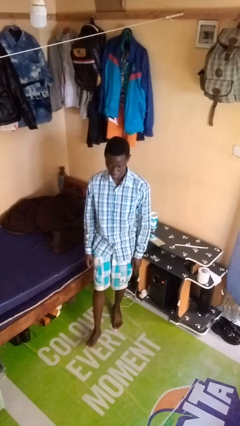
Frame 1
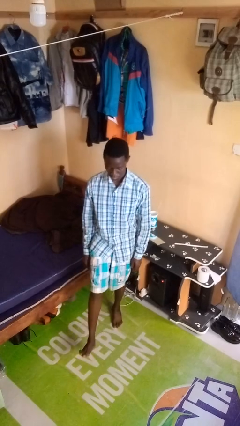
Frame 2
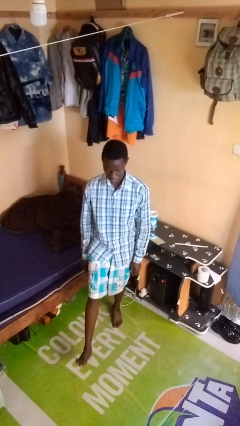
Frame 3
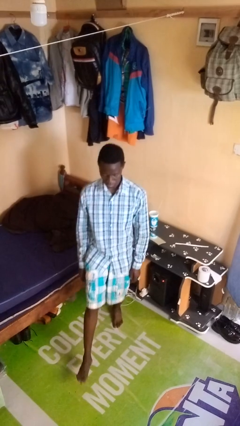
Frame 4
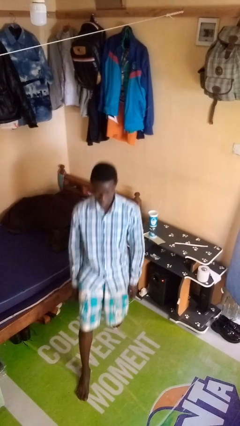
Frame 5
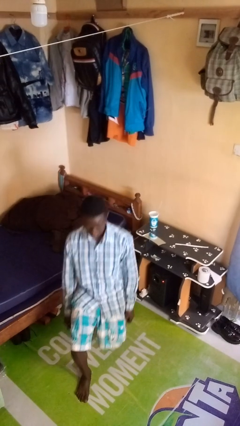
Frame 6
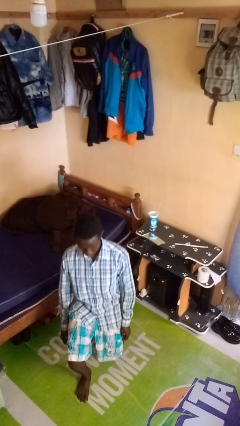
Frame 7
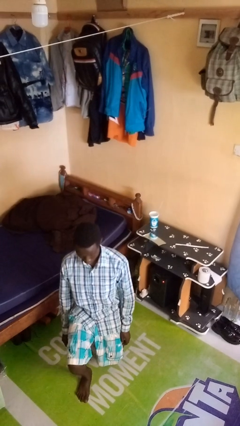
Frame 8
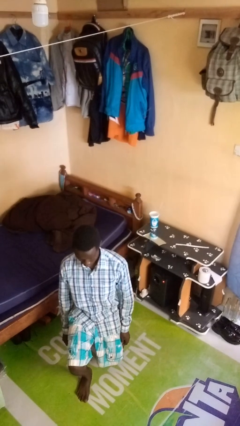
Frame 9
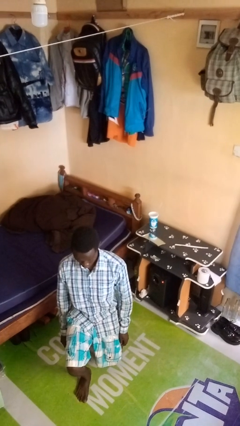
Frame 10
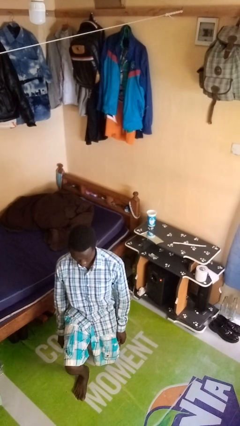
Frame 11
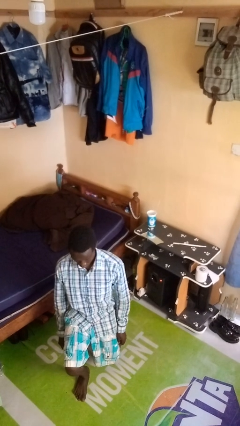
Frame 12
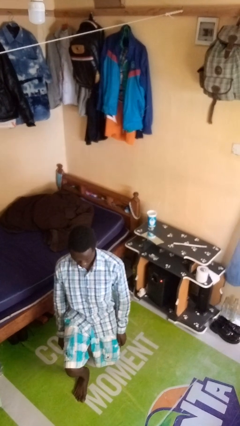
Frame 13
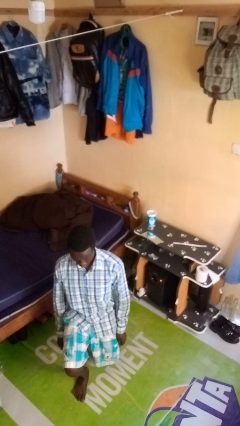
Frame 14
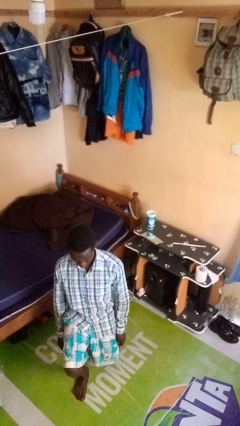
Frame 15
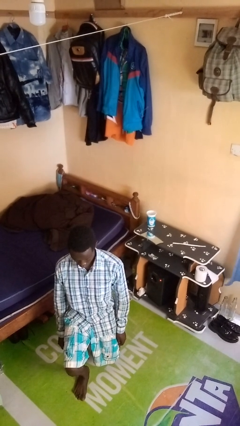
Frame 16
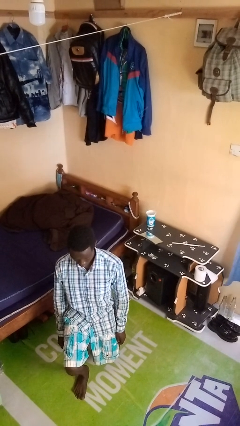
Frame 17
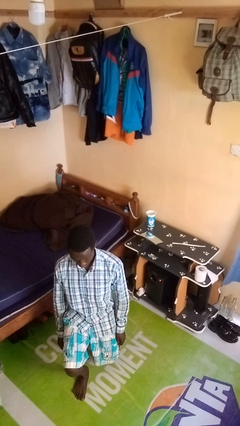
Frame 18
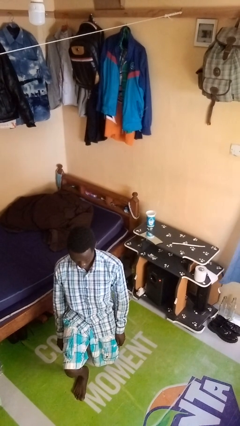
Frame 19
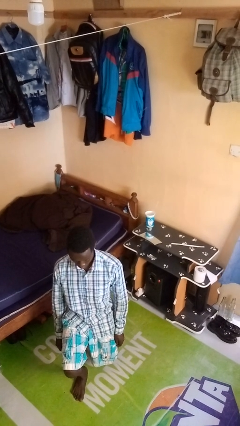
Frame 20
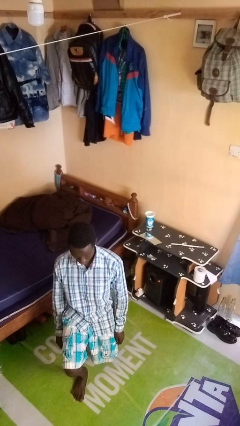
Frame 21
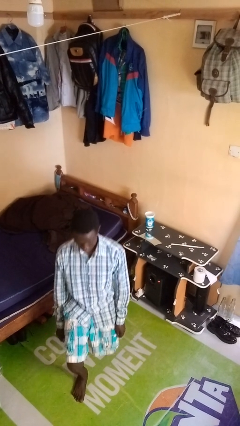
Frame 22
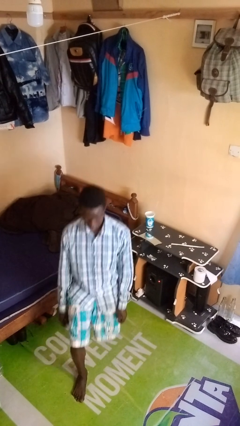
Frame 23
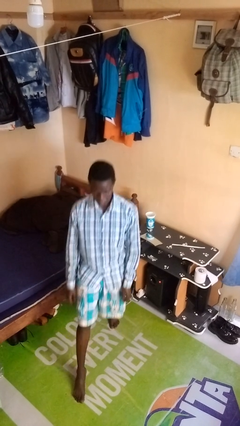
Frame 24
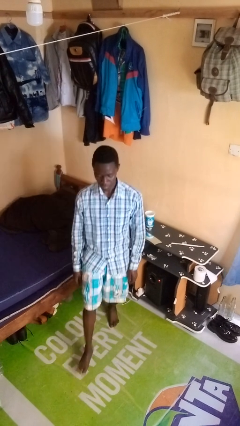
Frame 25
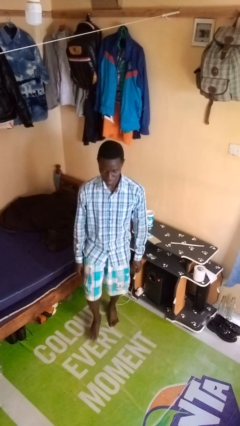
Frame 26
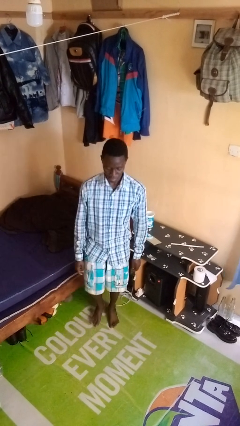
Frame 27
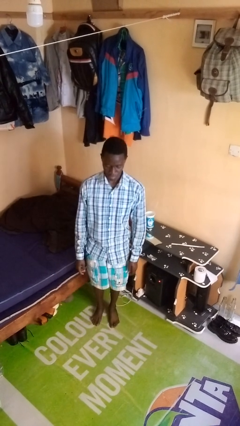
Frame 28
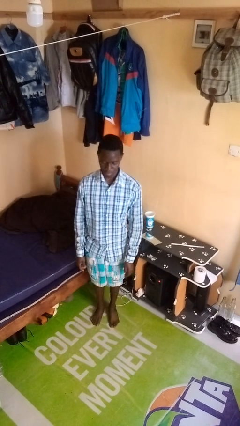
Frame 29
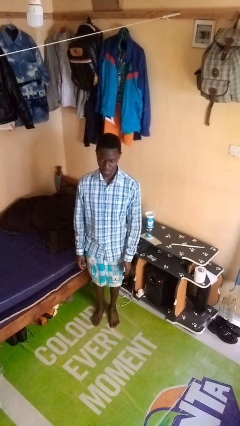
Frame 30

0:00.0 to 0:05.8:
person exercises with lunges

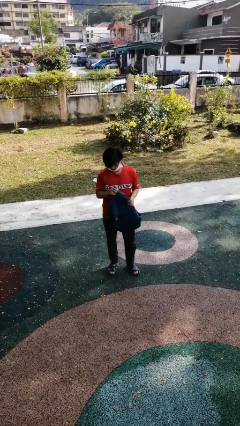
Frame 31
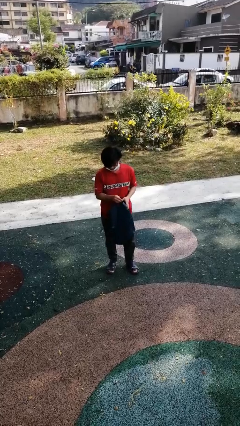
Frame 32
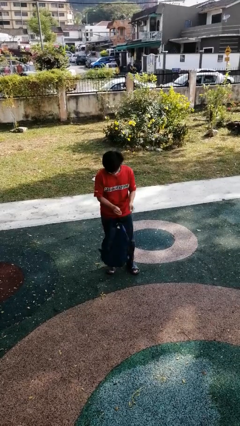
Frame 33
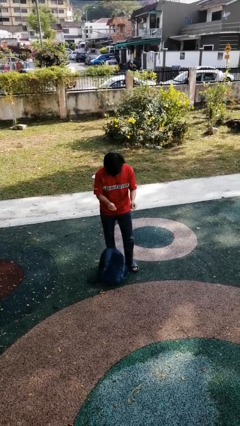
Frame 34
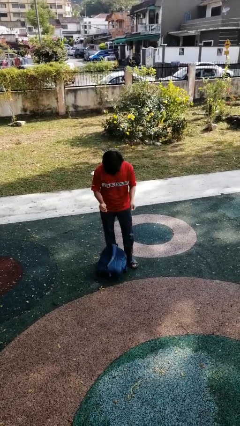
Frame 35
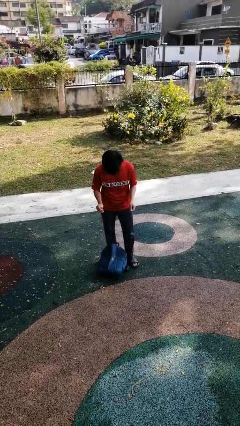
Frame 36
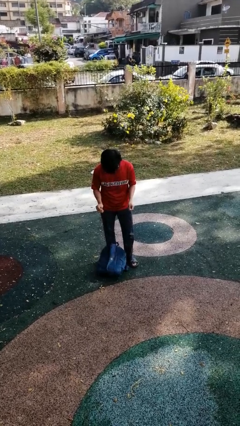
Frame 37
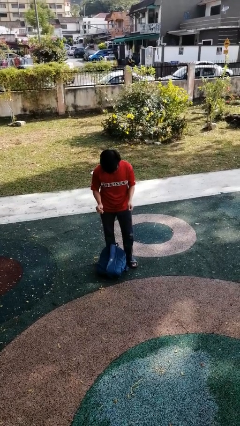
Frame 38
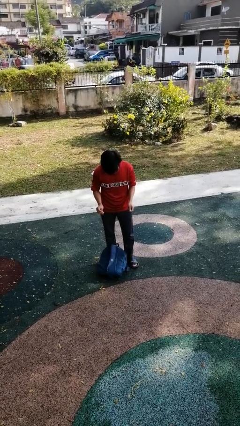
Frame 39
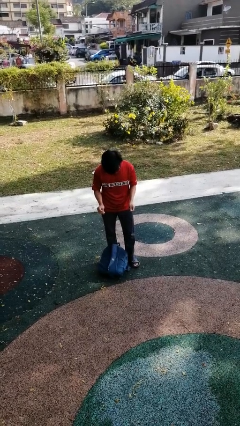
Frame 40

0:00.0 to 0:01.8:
person drops object

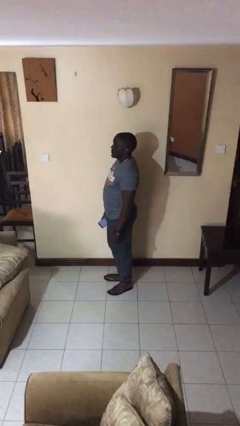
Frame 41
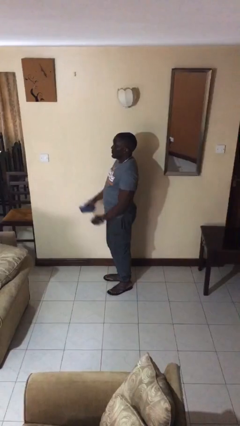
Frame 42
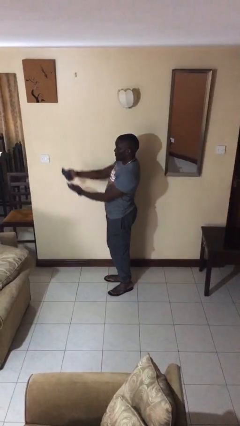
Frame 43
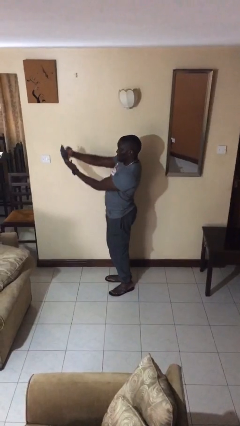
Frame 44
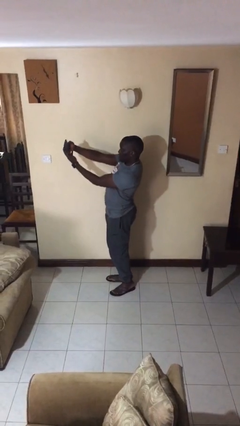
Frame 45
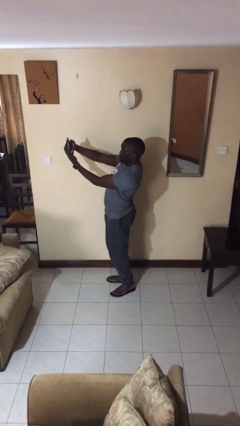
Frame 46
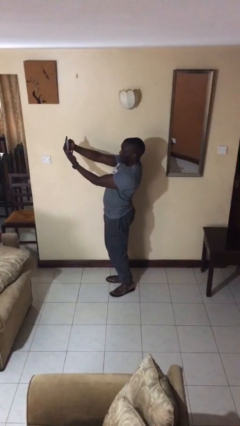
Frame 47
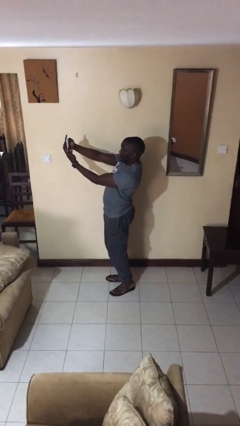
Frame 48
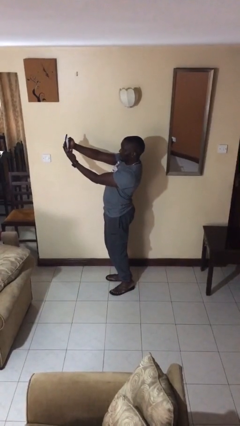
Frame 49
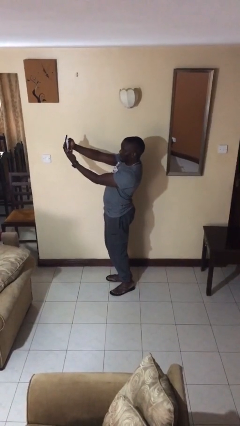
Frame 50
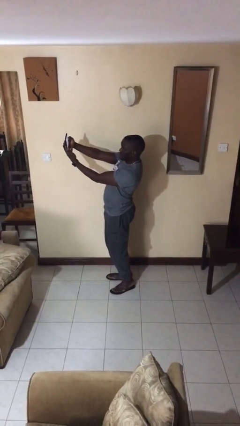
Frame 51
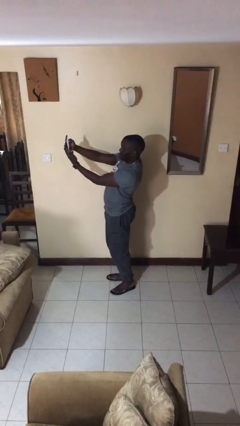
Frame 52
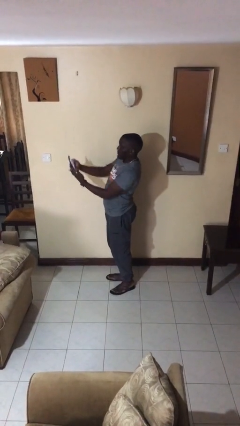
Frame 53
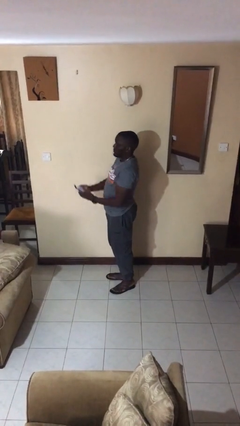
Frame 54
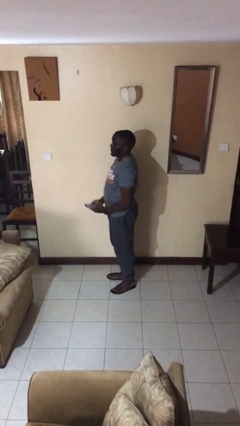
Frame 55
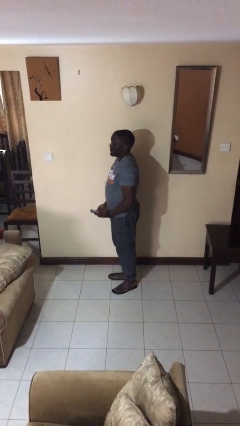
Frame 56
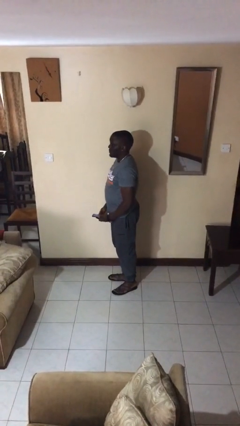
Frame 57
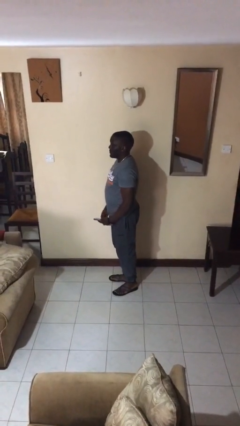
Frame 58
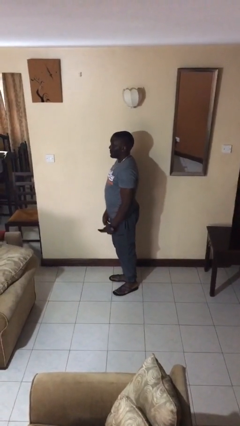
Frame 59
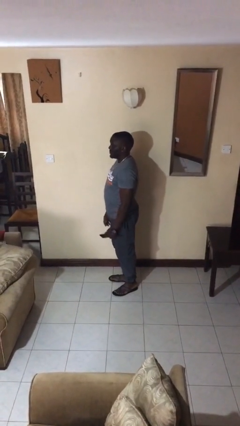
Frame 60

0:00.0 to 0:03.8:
person takes selfie

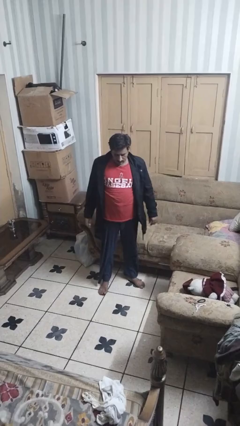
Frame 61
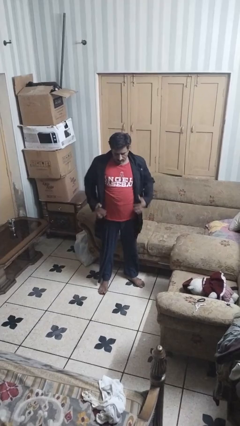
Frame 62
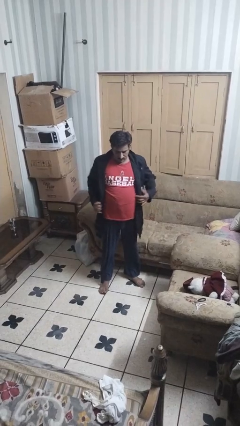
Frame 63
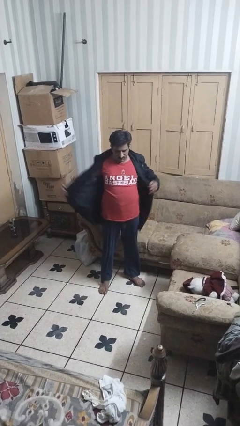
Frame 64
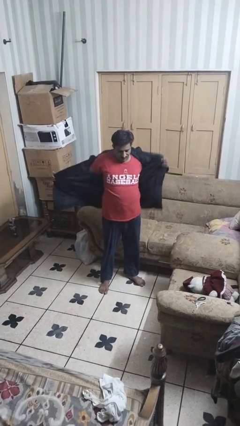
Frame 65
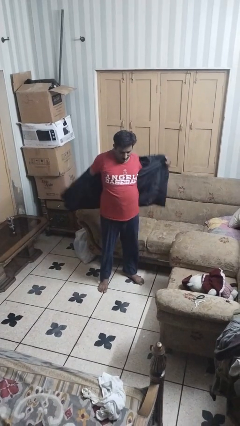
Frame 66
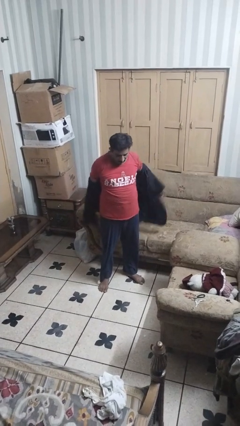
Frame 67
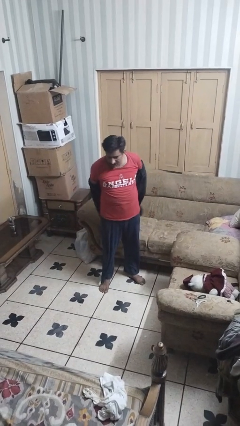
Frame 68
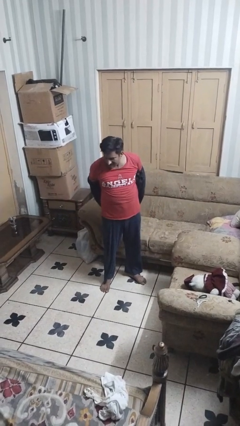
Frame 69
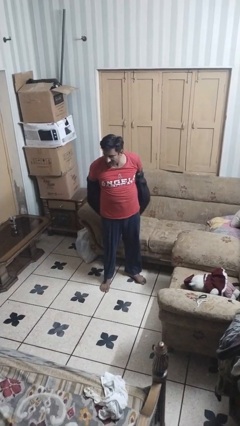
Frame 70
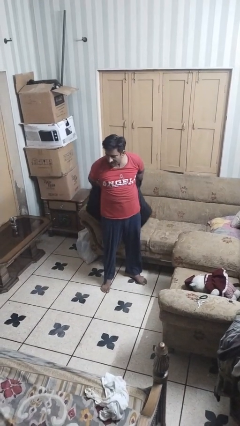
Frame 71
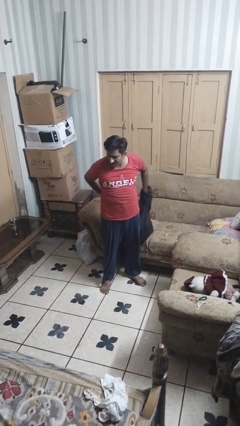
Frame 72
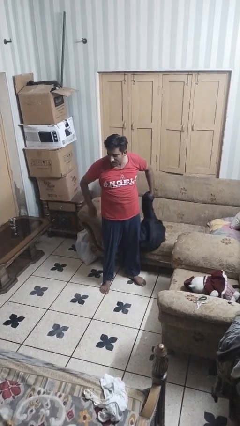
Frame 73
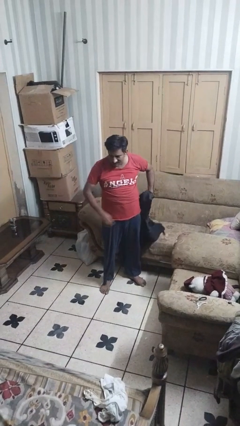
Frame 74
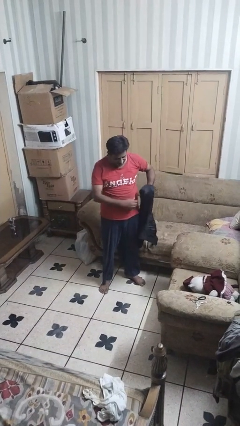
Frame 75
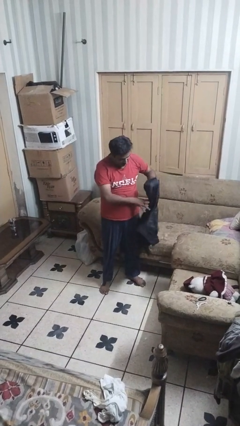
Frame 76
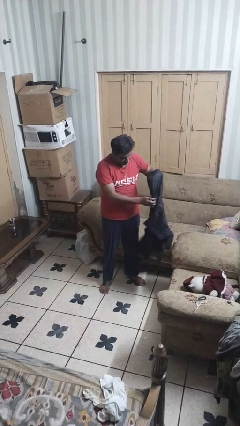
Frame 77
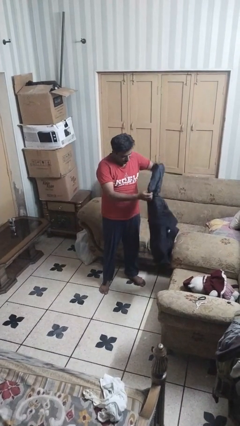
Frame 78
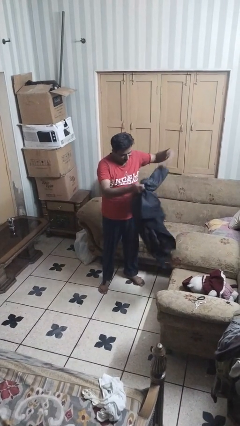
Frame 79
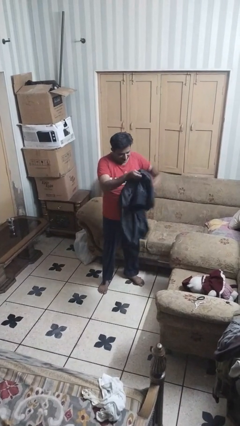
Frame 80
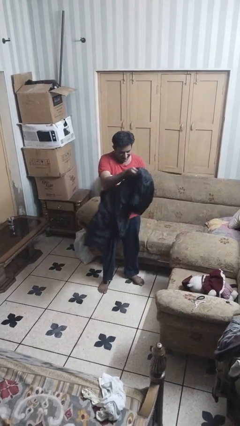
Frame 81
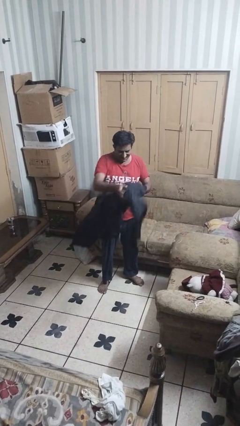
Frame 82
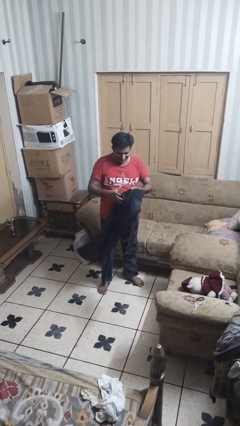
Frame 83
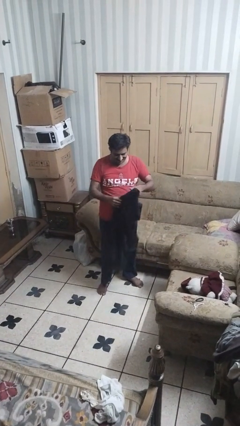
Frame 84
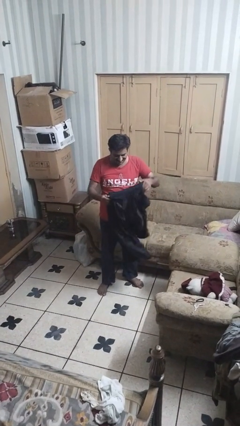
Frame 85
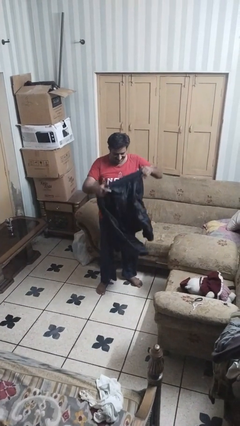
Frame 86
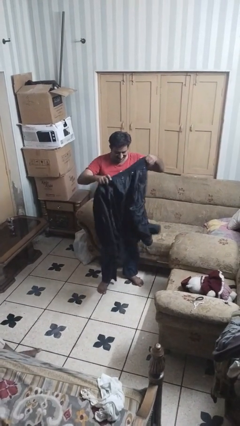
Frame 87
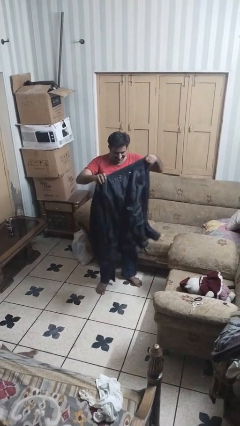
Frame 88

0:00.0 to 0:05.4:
person takes off jacket

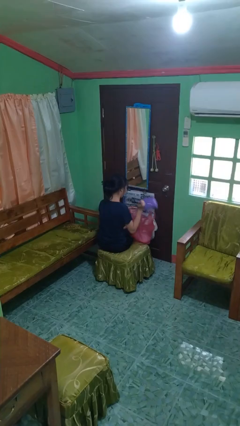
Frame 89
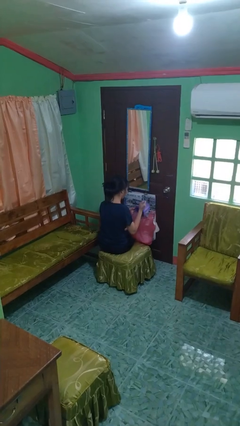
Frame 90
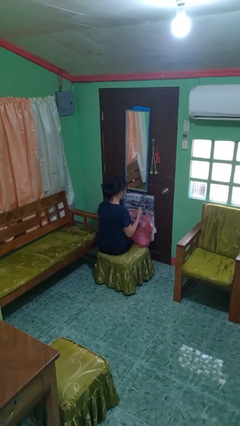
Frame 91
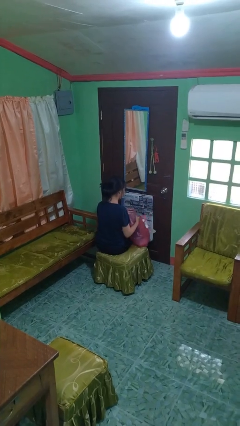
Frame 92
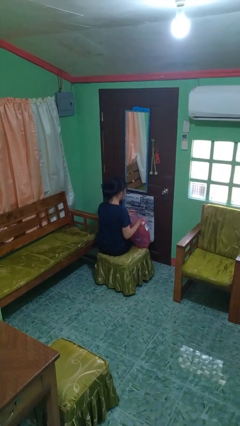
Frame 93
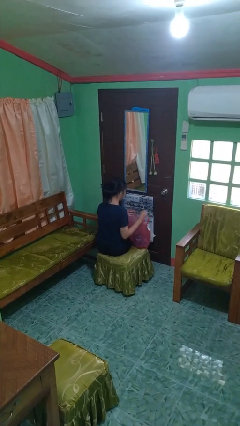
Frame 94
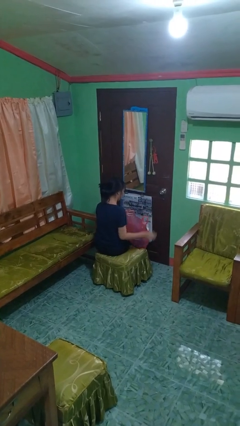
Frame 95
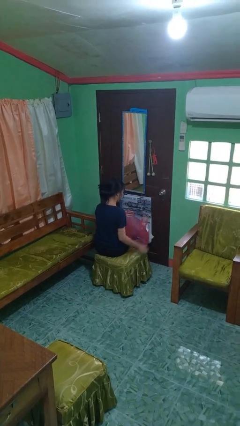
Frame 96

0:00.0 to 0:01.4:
person puts object into bag
